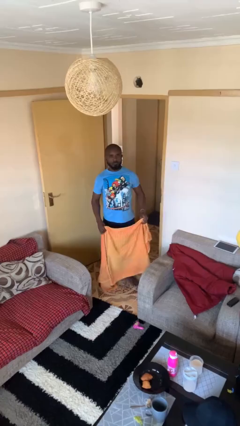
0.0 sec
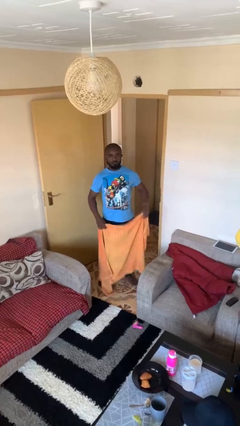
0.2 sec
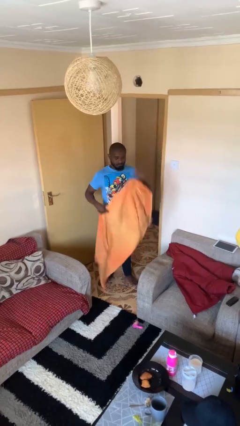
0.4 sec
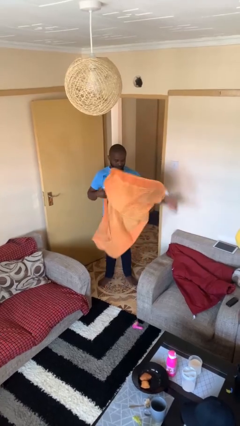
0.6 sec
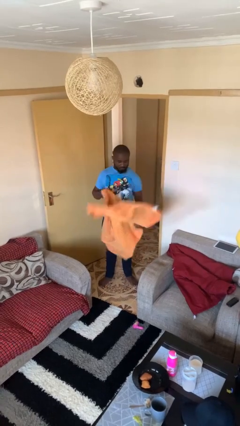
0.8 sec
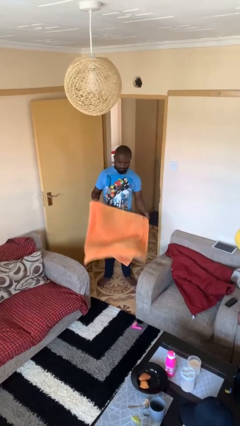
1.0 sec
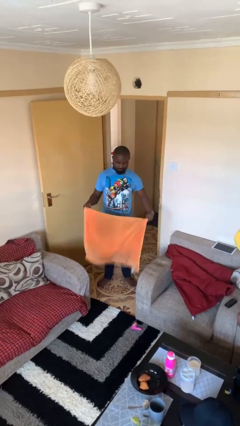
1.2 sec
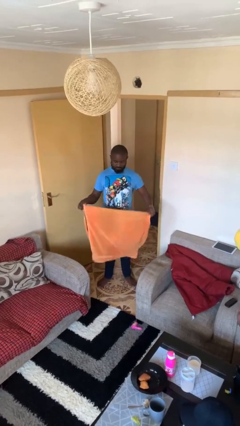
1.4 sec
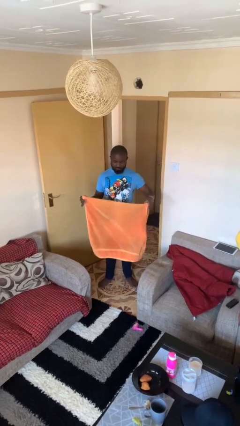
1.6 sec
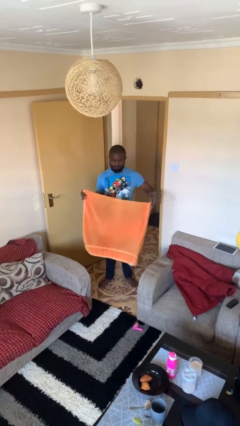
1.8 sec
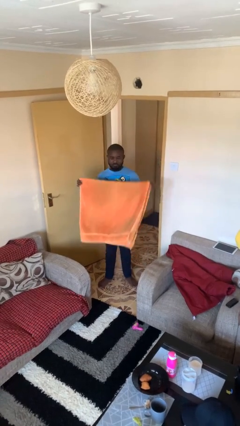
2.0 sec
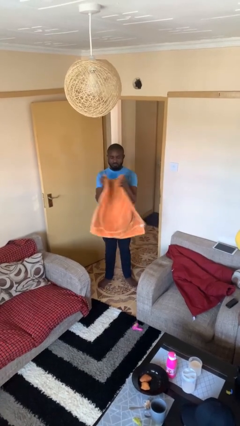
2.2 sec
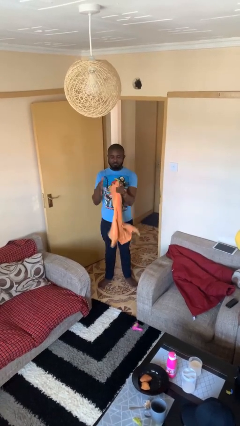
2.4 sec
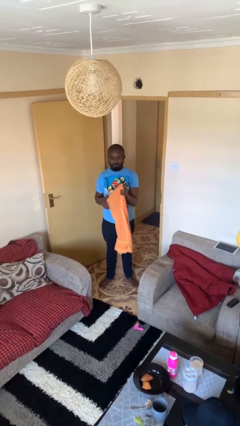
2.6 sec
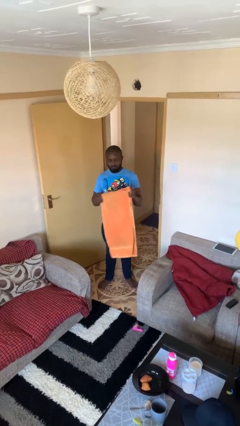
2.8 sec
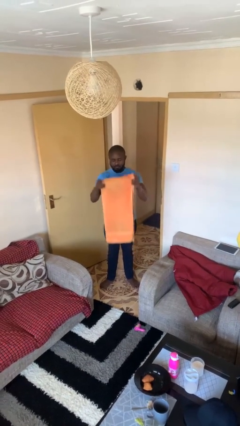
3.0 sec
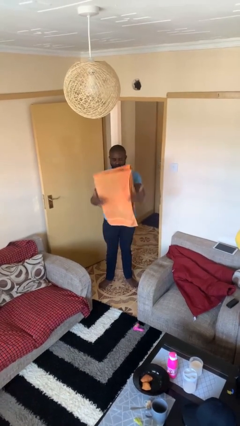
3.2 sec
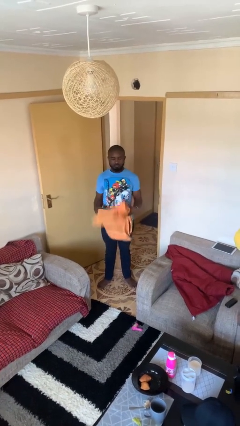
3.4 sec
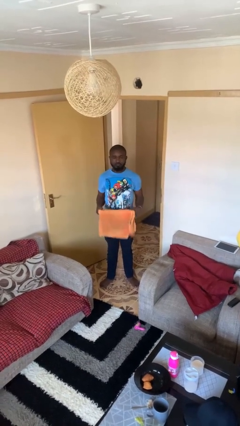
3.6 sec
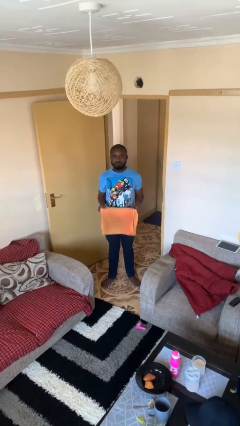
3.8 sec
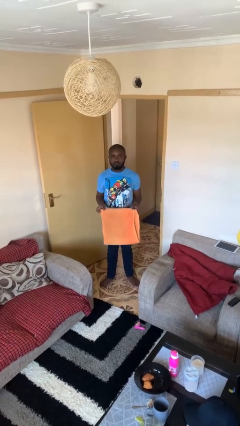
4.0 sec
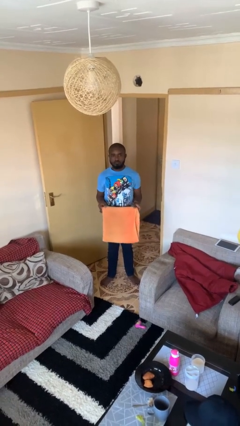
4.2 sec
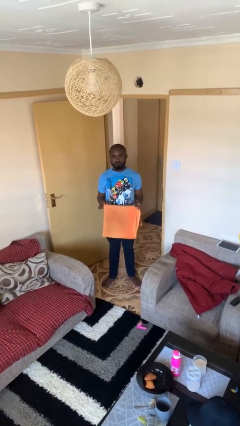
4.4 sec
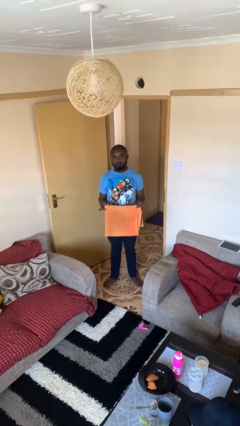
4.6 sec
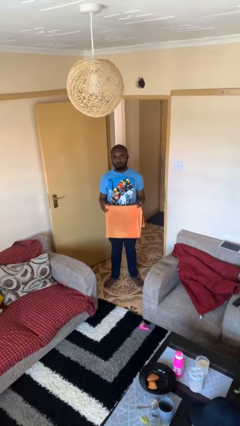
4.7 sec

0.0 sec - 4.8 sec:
person folds towel

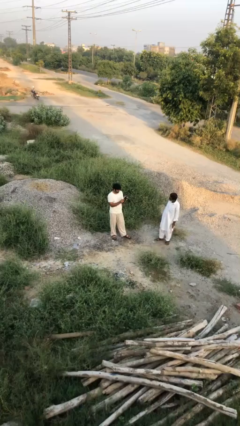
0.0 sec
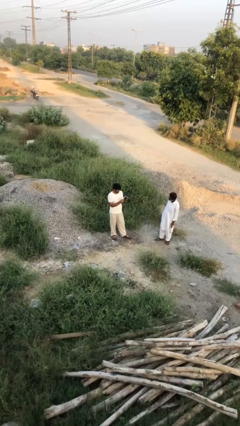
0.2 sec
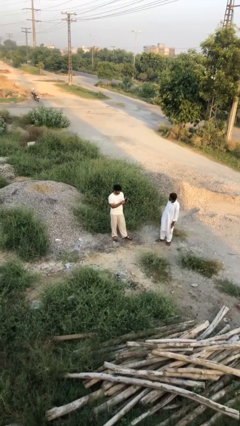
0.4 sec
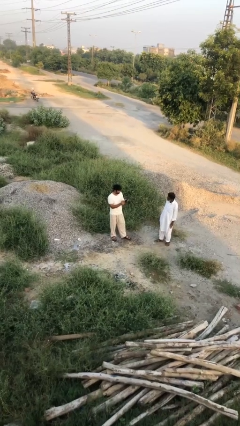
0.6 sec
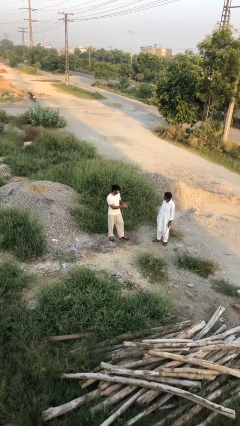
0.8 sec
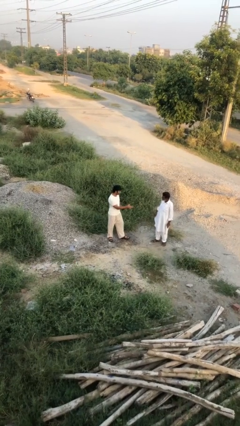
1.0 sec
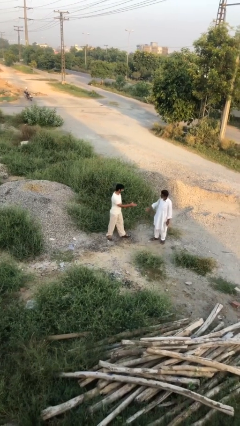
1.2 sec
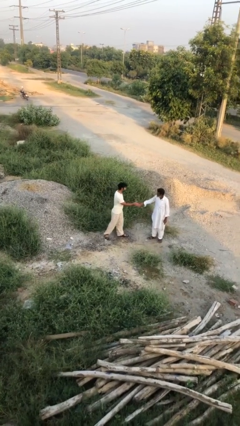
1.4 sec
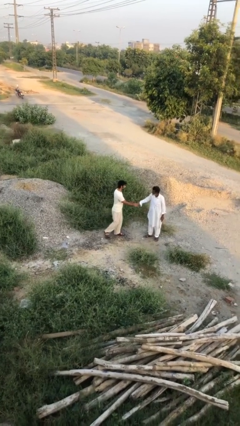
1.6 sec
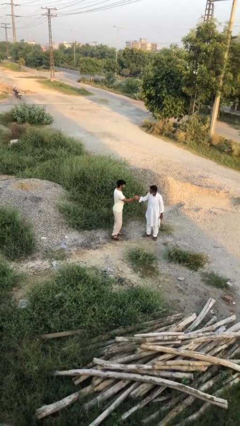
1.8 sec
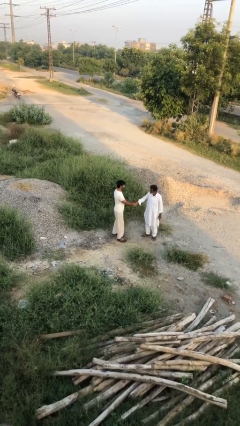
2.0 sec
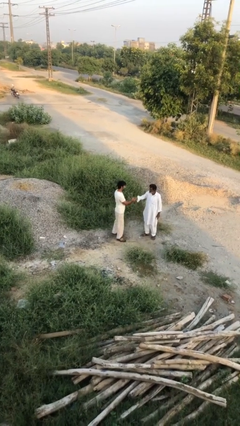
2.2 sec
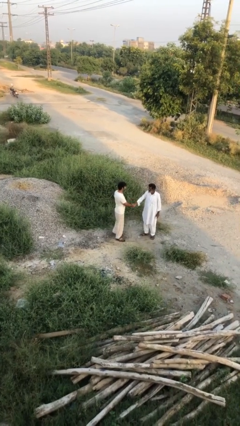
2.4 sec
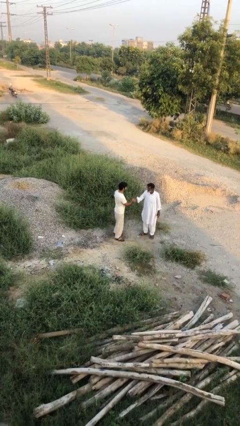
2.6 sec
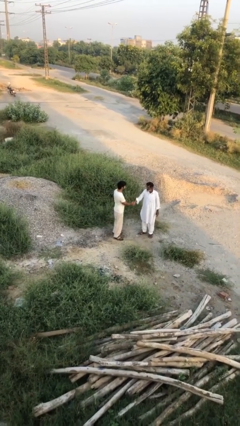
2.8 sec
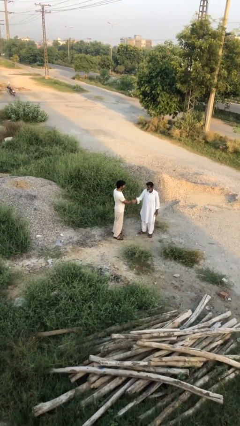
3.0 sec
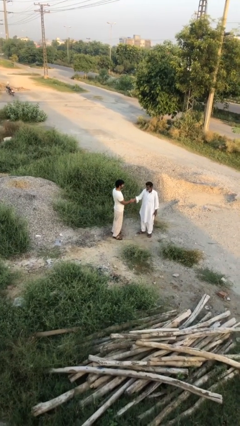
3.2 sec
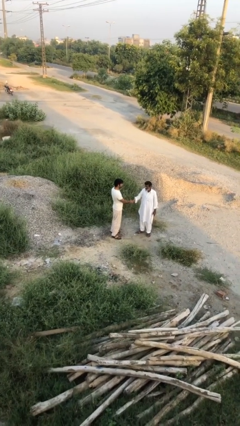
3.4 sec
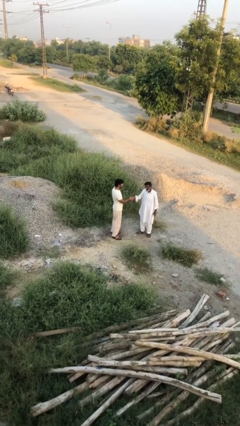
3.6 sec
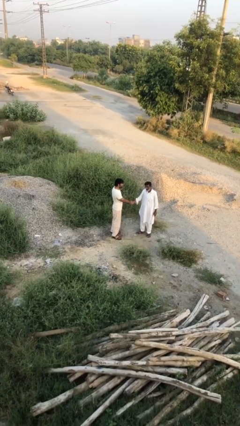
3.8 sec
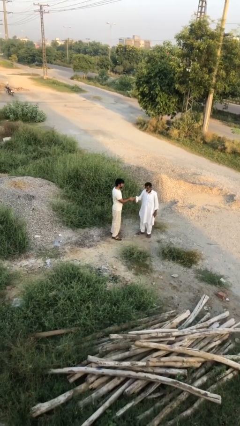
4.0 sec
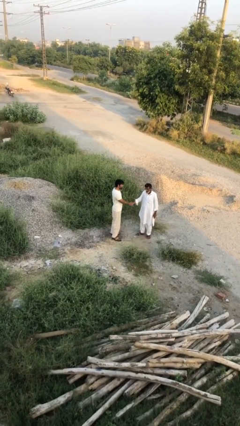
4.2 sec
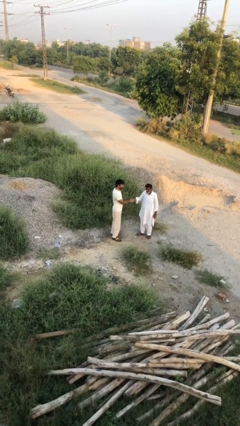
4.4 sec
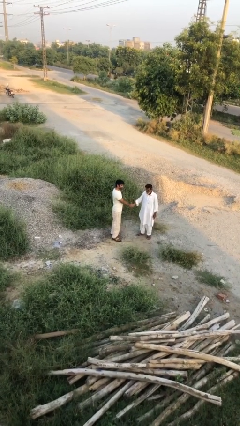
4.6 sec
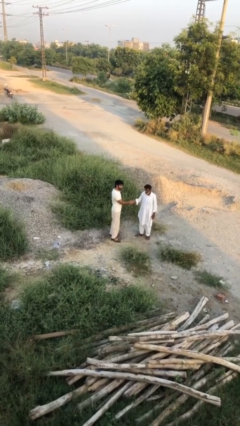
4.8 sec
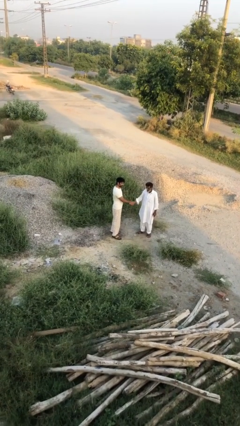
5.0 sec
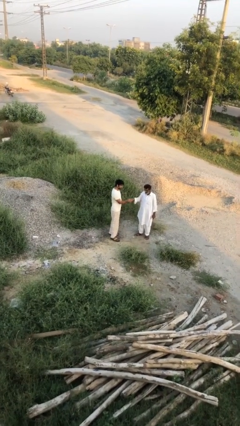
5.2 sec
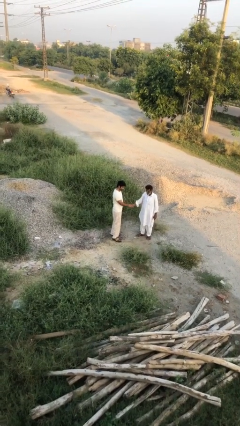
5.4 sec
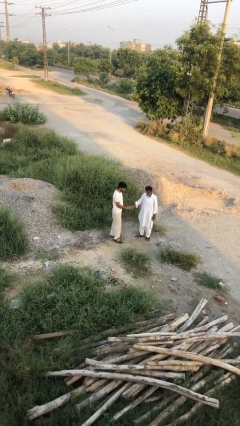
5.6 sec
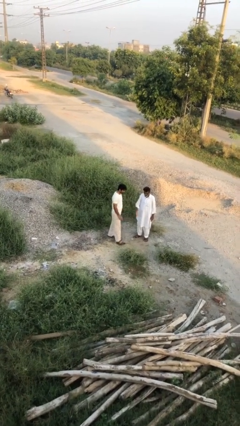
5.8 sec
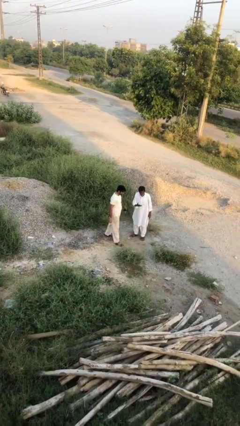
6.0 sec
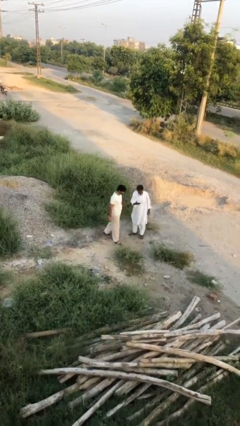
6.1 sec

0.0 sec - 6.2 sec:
person shakes hand

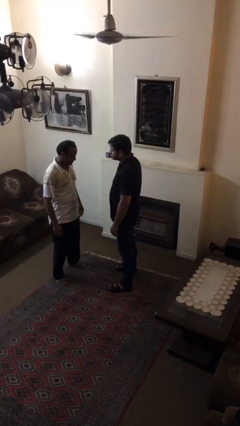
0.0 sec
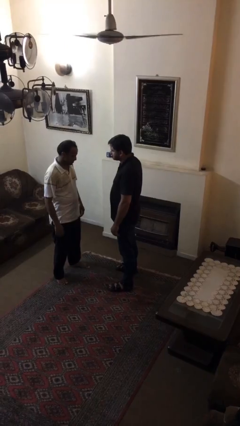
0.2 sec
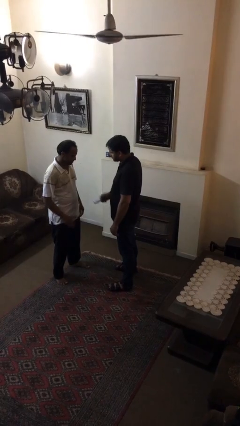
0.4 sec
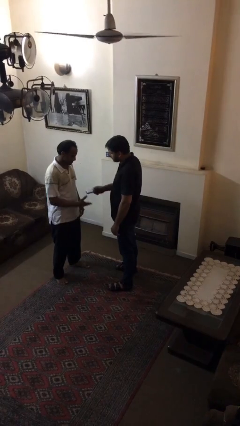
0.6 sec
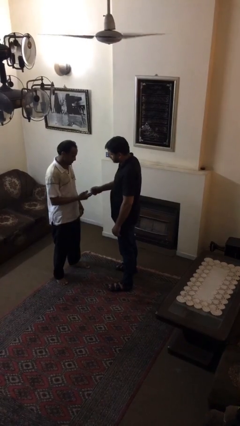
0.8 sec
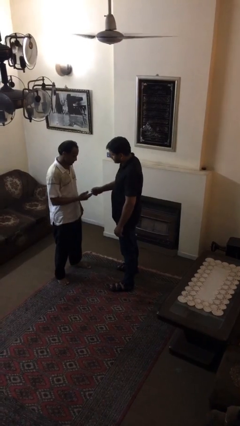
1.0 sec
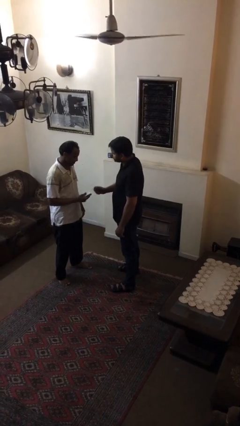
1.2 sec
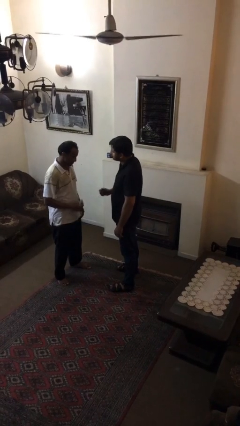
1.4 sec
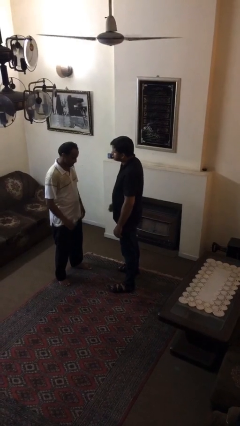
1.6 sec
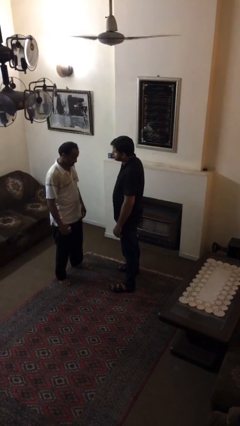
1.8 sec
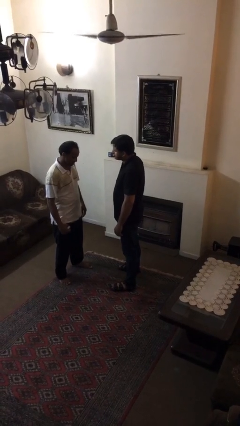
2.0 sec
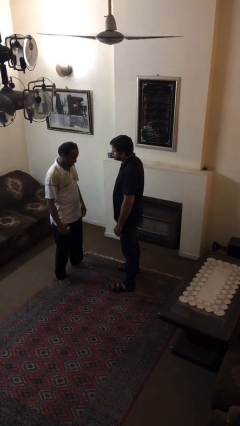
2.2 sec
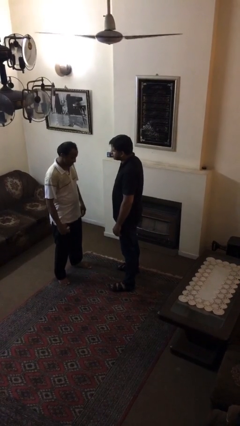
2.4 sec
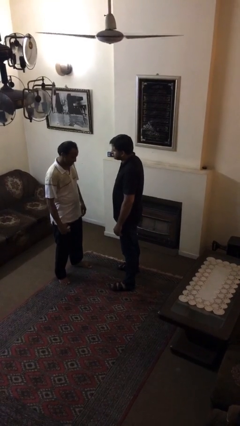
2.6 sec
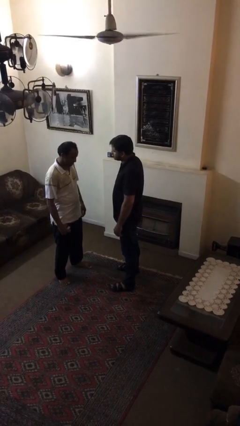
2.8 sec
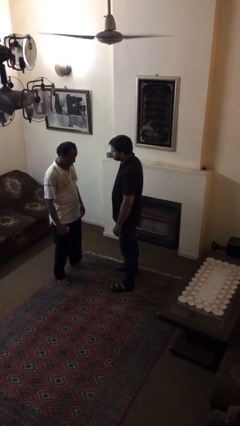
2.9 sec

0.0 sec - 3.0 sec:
person transfers object to person

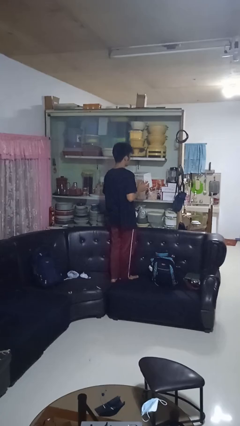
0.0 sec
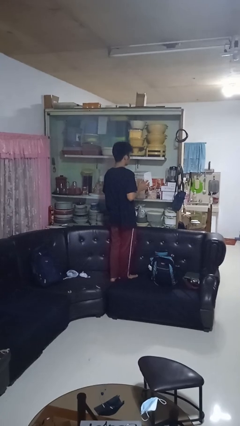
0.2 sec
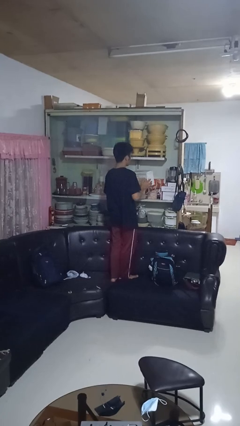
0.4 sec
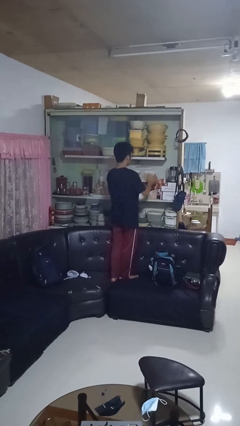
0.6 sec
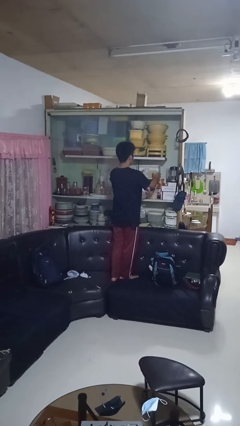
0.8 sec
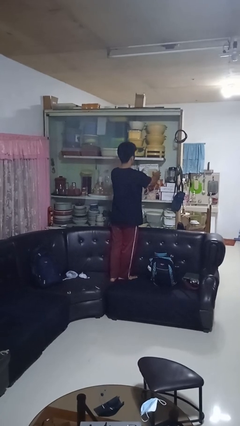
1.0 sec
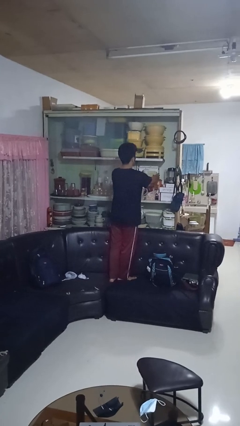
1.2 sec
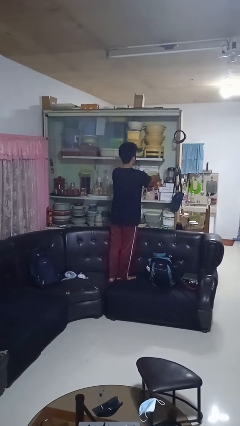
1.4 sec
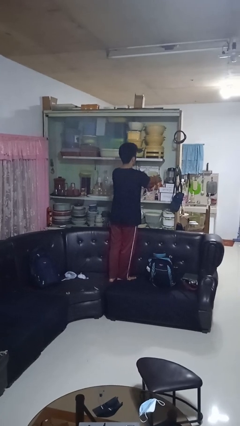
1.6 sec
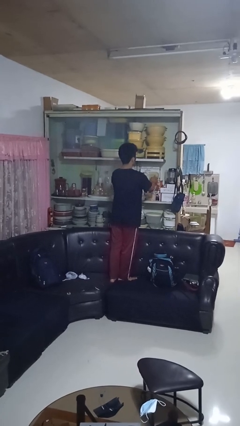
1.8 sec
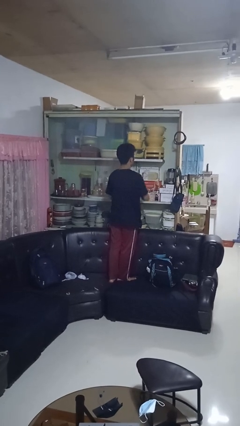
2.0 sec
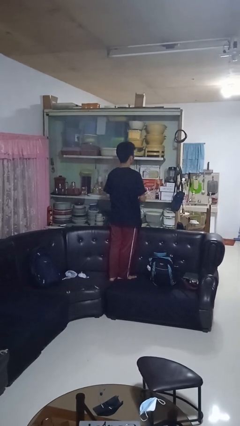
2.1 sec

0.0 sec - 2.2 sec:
person puts down object into cabinet

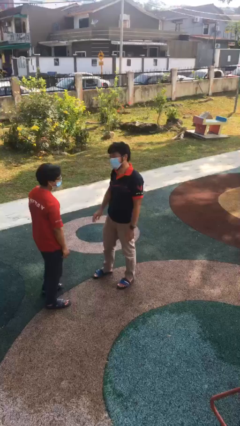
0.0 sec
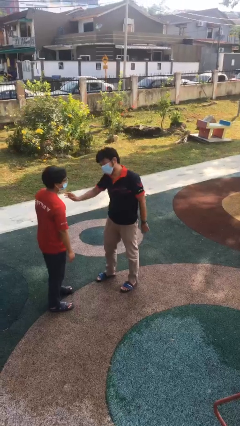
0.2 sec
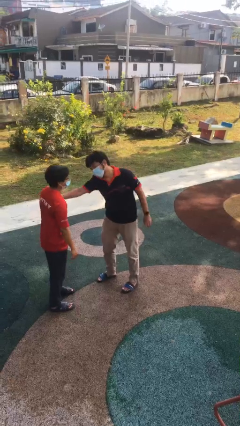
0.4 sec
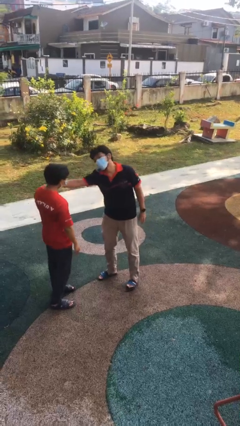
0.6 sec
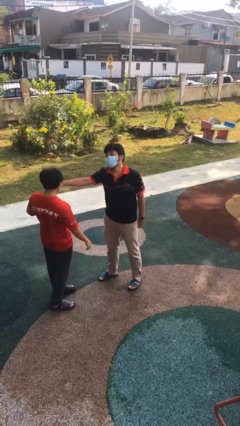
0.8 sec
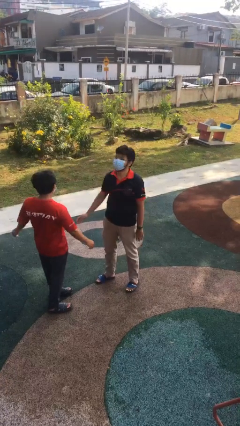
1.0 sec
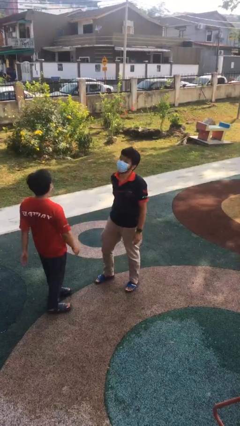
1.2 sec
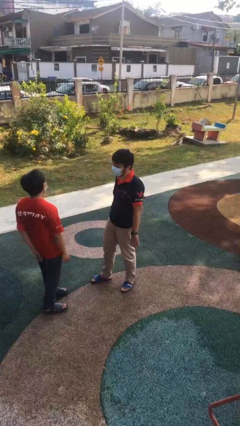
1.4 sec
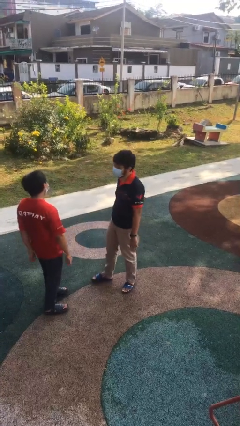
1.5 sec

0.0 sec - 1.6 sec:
person shoves person
